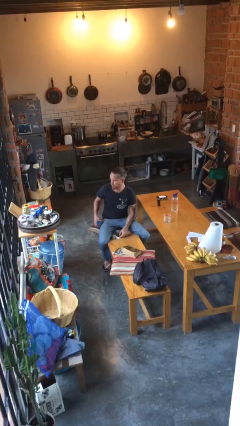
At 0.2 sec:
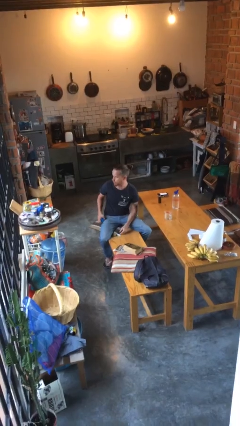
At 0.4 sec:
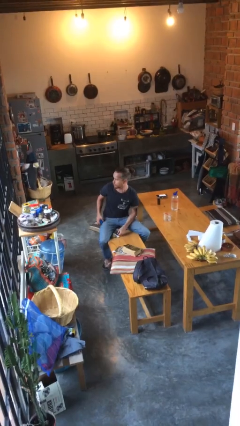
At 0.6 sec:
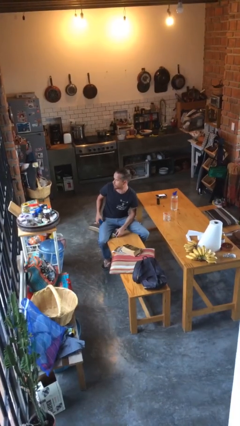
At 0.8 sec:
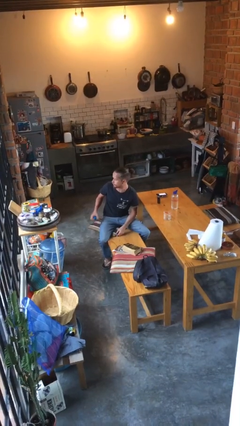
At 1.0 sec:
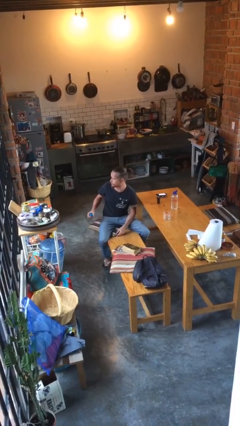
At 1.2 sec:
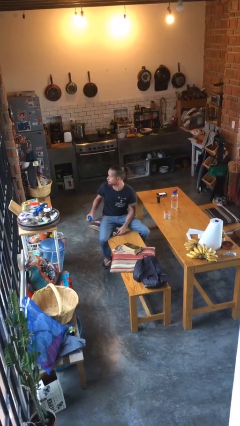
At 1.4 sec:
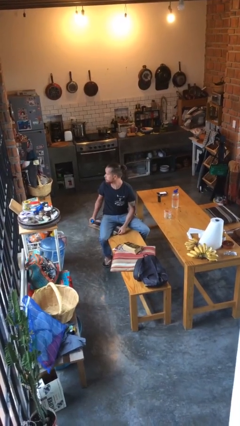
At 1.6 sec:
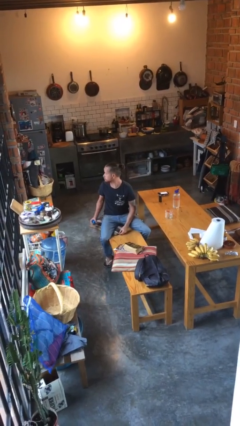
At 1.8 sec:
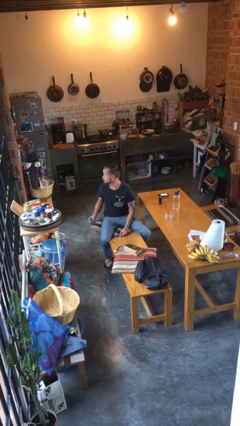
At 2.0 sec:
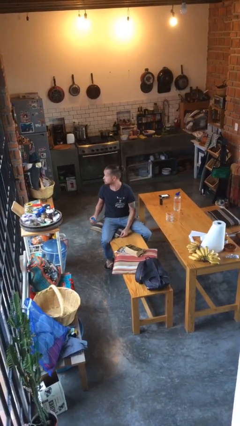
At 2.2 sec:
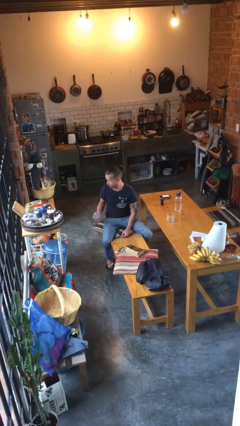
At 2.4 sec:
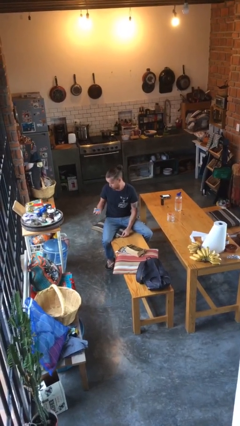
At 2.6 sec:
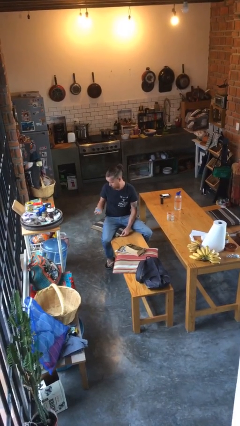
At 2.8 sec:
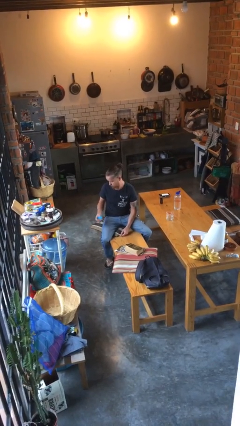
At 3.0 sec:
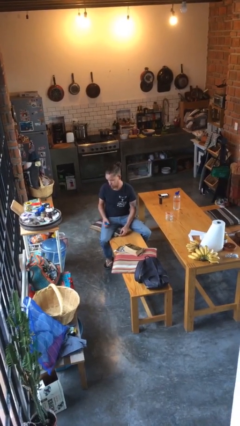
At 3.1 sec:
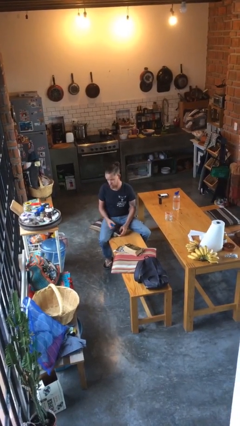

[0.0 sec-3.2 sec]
person squeezes object

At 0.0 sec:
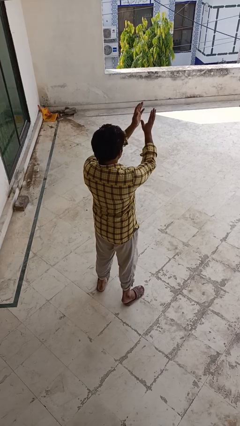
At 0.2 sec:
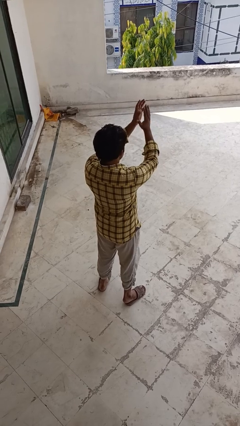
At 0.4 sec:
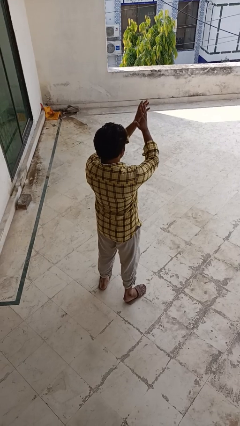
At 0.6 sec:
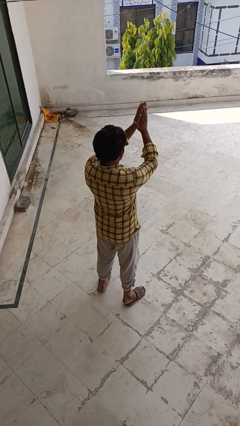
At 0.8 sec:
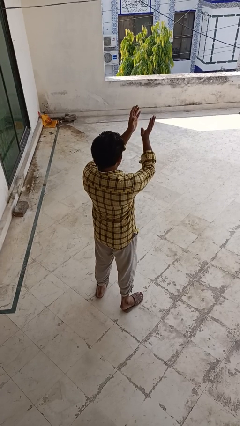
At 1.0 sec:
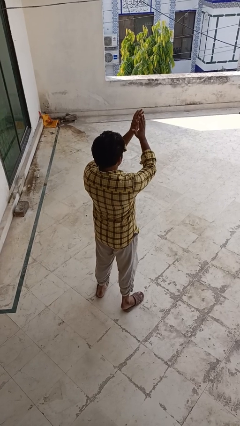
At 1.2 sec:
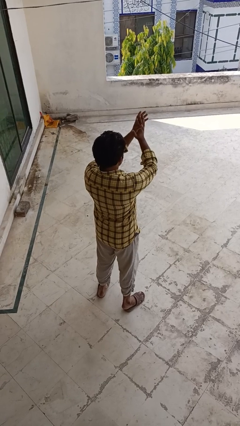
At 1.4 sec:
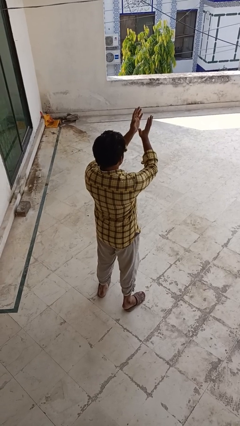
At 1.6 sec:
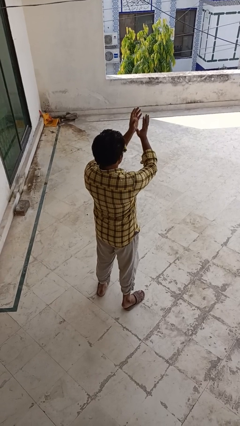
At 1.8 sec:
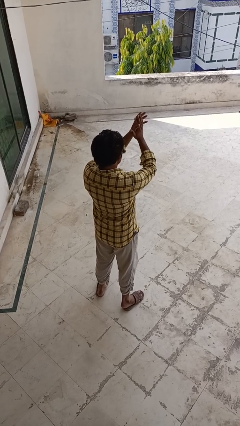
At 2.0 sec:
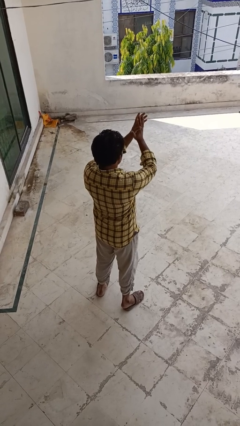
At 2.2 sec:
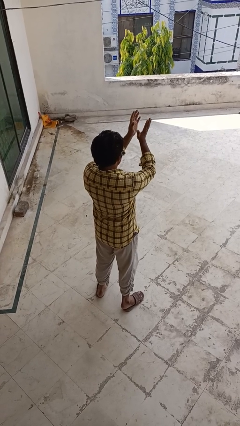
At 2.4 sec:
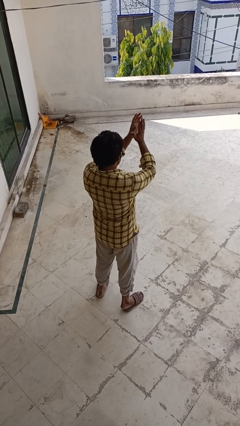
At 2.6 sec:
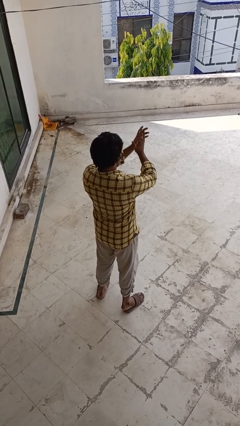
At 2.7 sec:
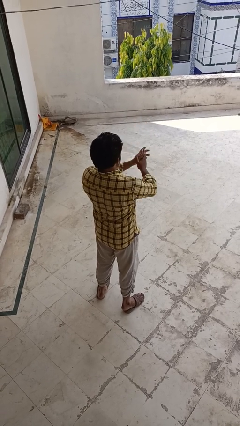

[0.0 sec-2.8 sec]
person claps hands

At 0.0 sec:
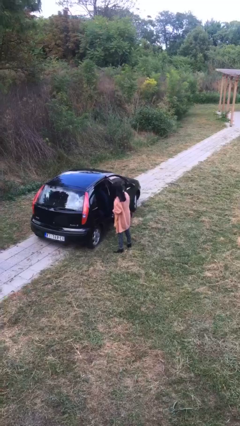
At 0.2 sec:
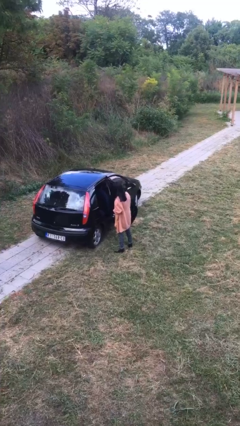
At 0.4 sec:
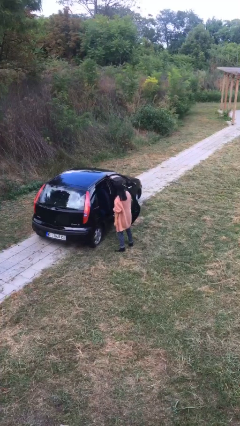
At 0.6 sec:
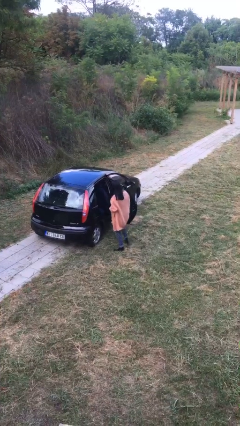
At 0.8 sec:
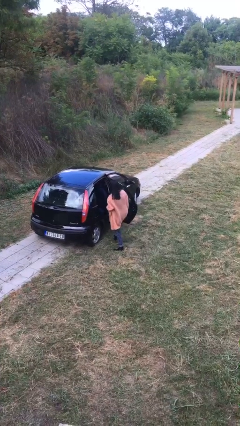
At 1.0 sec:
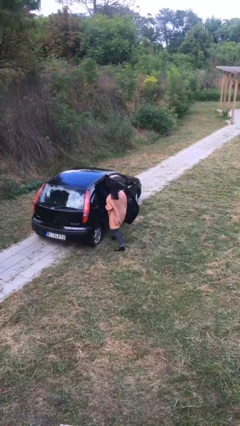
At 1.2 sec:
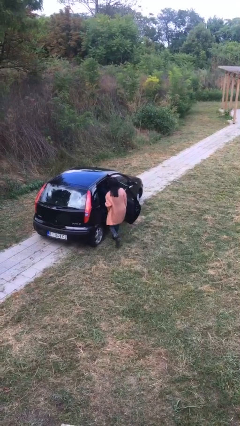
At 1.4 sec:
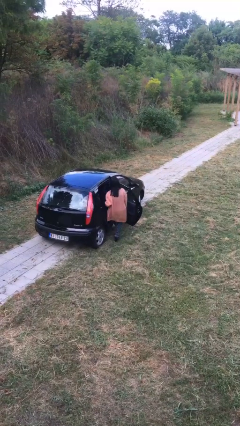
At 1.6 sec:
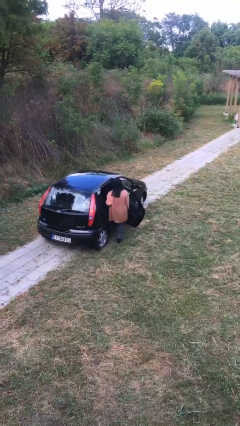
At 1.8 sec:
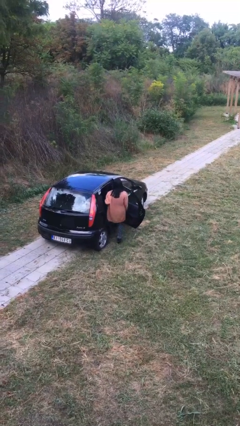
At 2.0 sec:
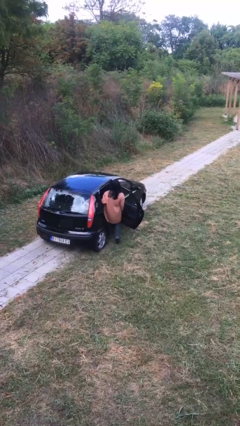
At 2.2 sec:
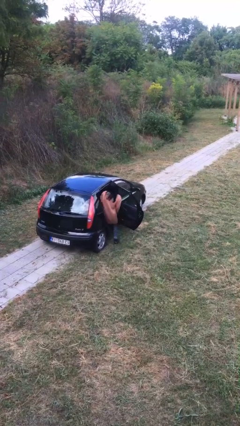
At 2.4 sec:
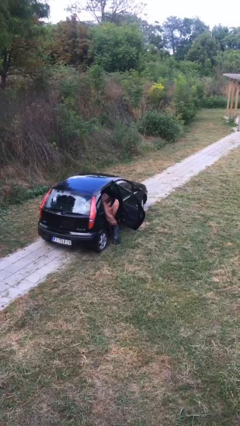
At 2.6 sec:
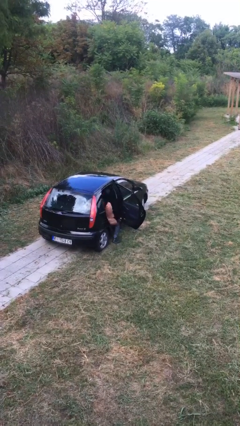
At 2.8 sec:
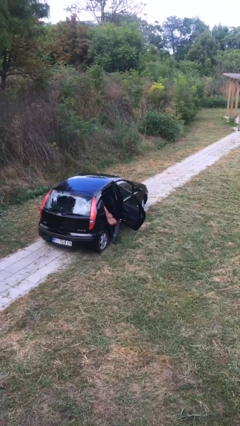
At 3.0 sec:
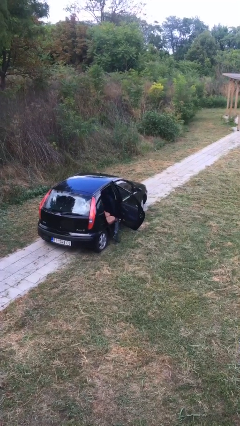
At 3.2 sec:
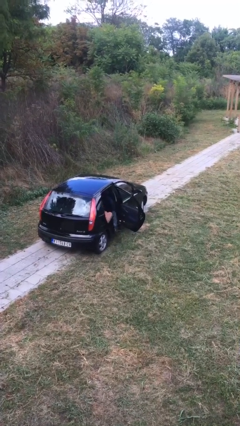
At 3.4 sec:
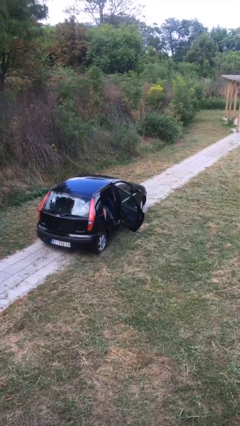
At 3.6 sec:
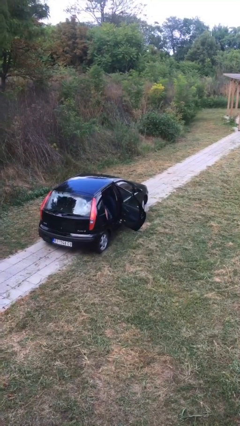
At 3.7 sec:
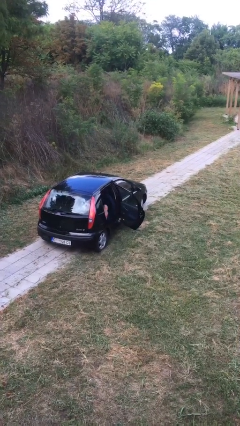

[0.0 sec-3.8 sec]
person enters car

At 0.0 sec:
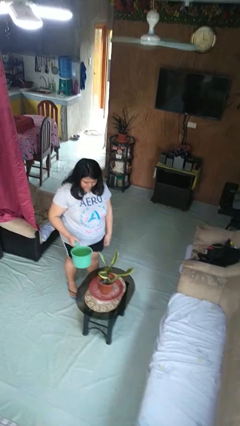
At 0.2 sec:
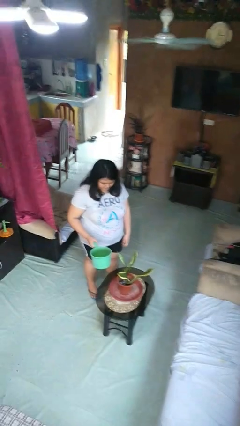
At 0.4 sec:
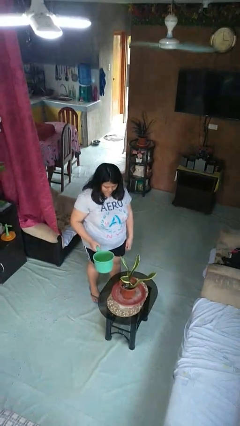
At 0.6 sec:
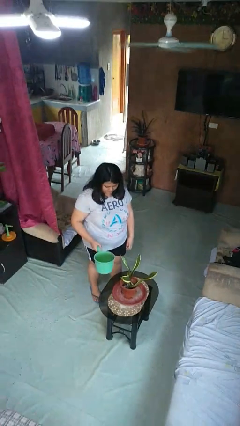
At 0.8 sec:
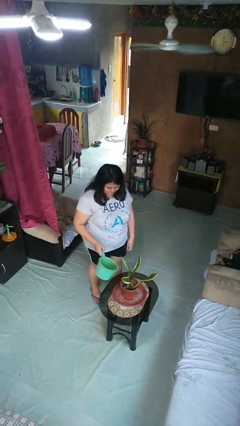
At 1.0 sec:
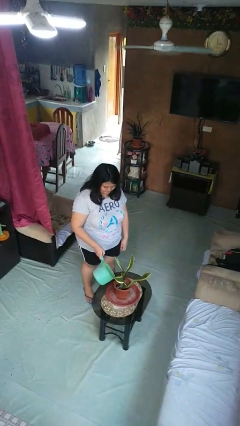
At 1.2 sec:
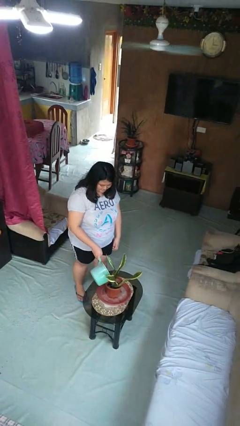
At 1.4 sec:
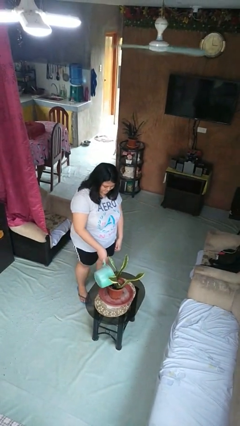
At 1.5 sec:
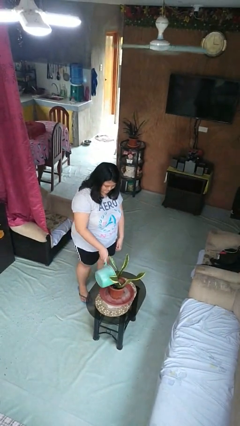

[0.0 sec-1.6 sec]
person waters houseplant

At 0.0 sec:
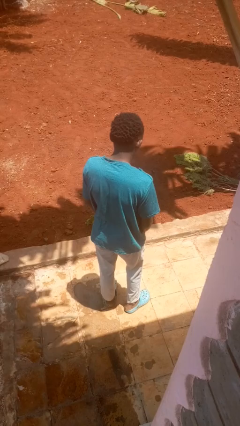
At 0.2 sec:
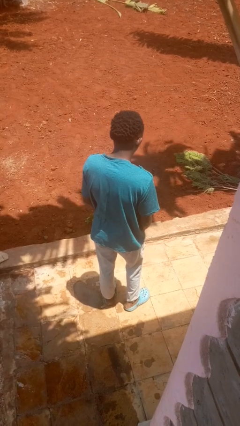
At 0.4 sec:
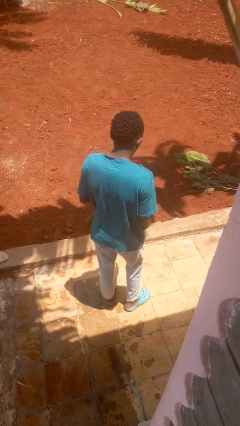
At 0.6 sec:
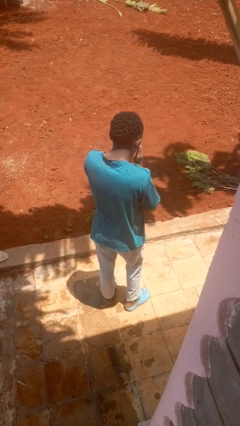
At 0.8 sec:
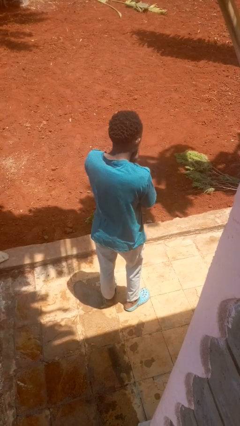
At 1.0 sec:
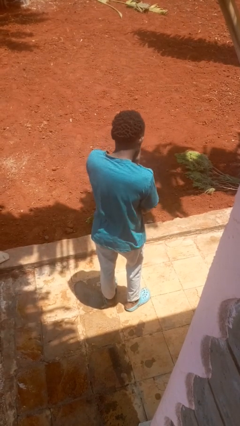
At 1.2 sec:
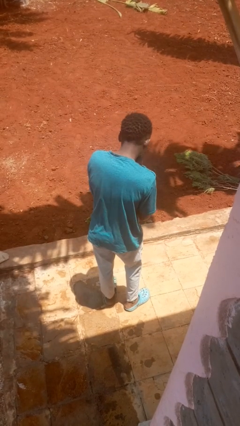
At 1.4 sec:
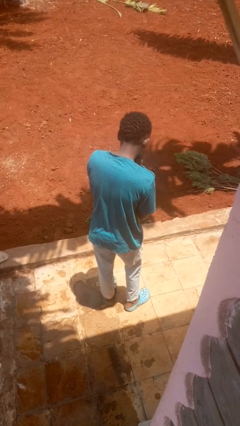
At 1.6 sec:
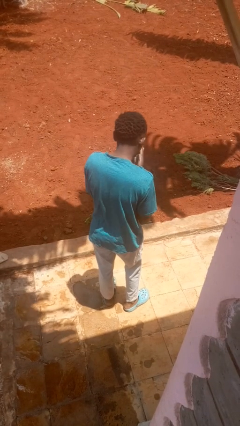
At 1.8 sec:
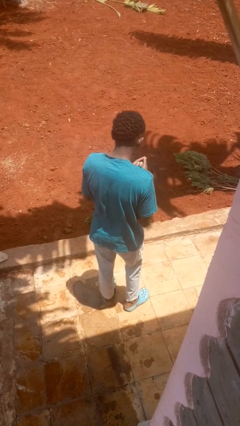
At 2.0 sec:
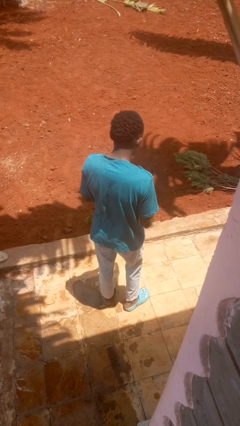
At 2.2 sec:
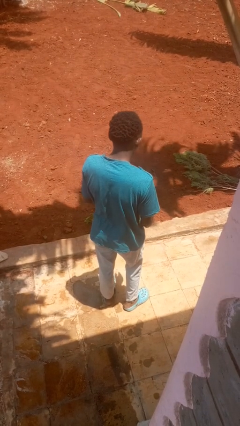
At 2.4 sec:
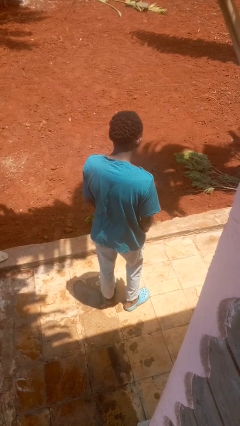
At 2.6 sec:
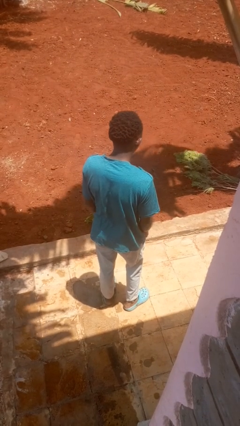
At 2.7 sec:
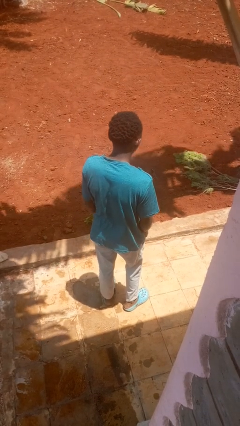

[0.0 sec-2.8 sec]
person sneezes into hand

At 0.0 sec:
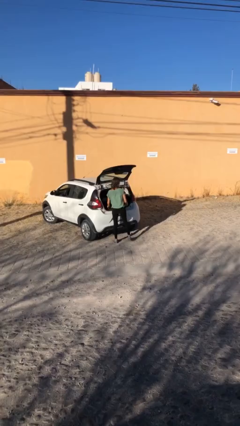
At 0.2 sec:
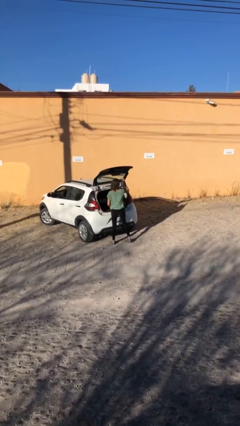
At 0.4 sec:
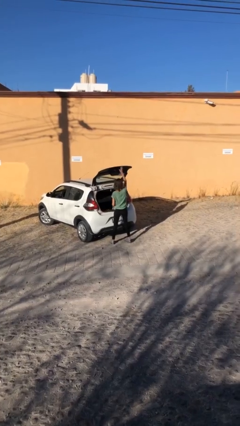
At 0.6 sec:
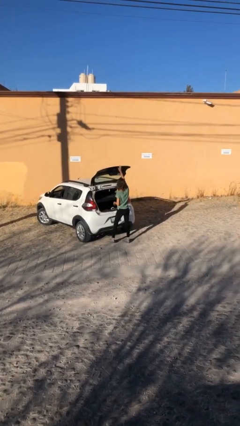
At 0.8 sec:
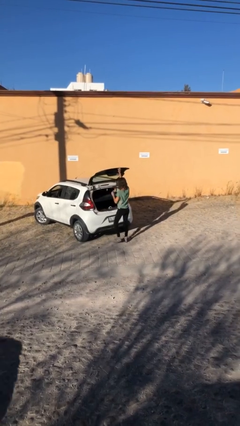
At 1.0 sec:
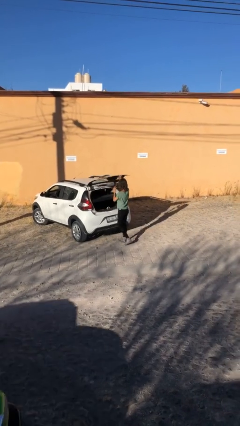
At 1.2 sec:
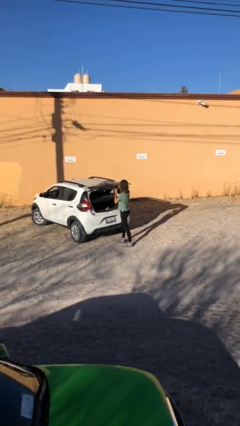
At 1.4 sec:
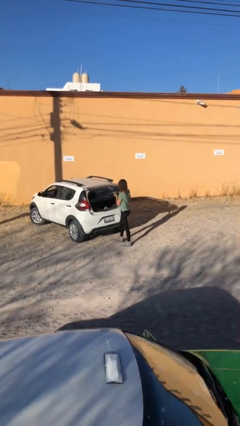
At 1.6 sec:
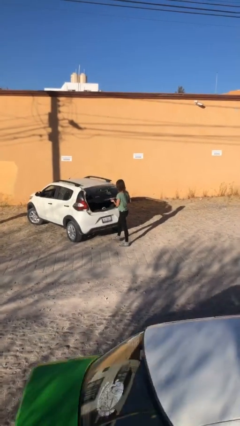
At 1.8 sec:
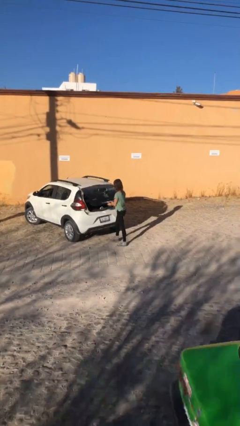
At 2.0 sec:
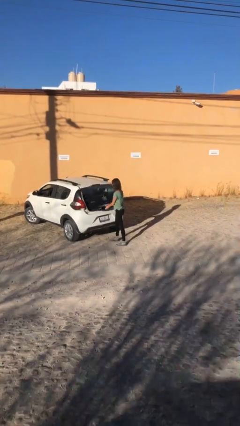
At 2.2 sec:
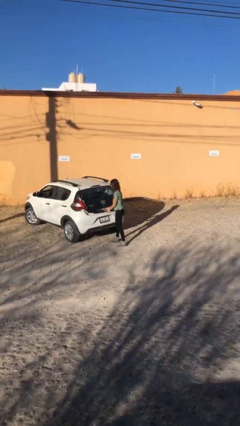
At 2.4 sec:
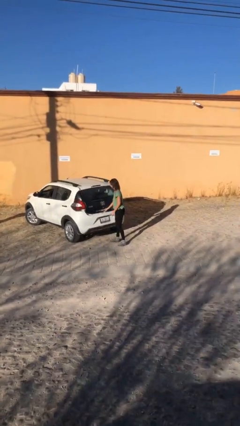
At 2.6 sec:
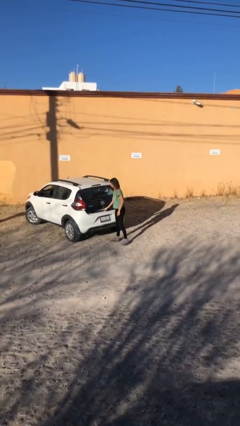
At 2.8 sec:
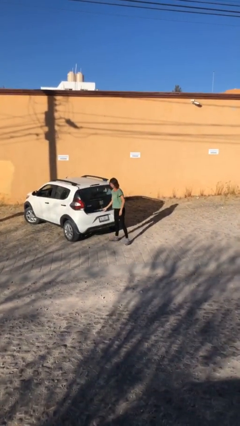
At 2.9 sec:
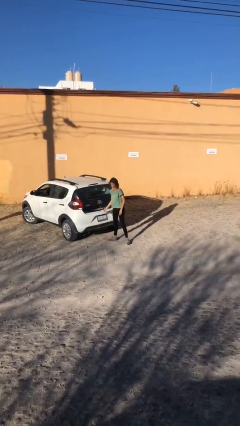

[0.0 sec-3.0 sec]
person closes car trunk
